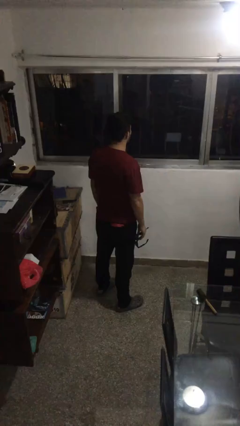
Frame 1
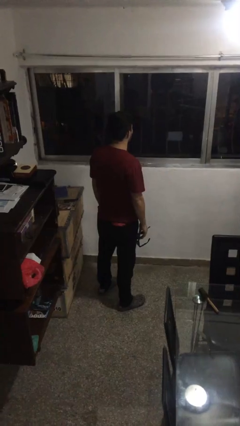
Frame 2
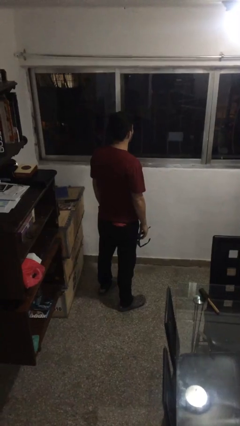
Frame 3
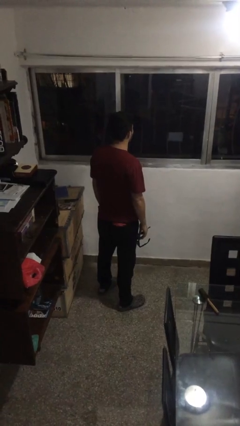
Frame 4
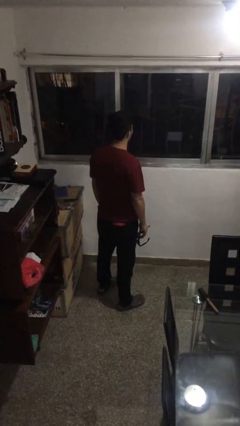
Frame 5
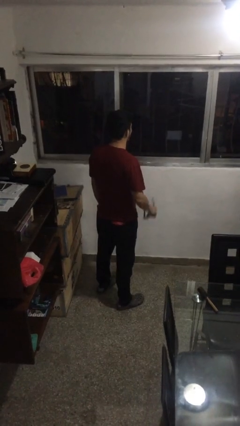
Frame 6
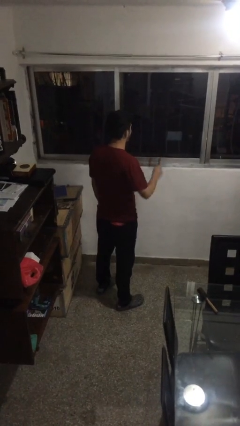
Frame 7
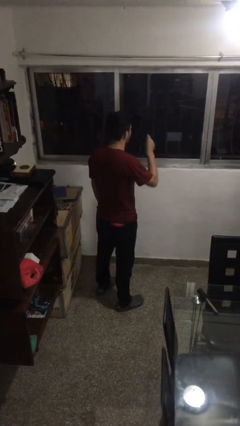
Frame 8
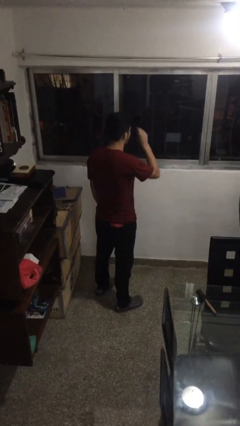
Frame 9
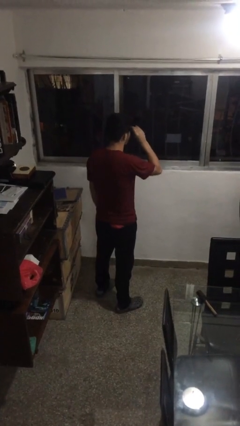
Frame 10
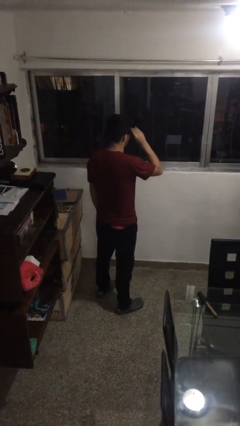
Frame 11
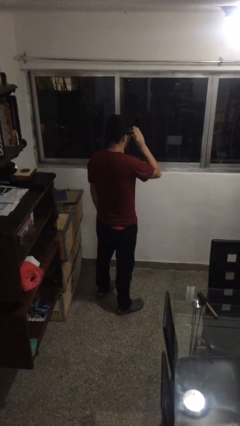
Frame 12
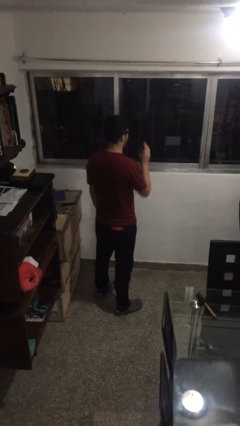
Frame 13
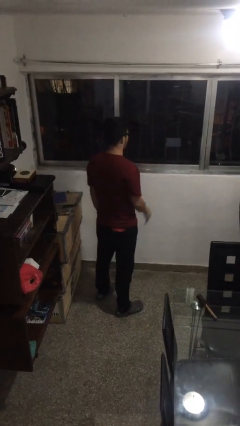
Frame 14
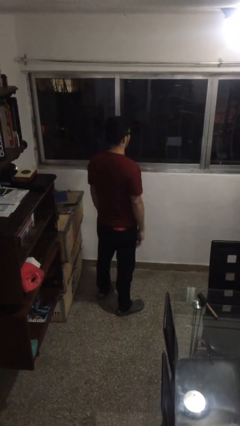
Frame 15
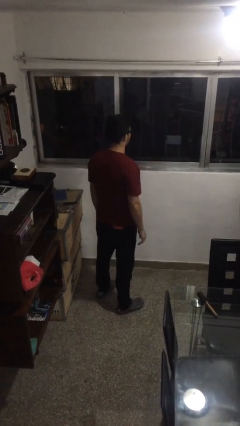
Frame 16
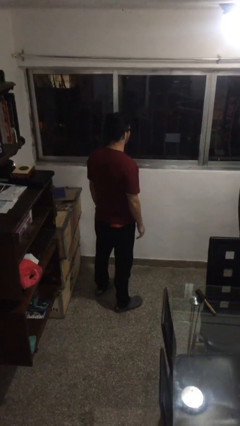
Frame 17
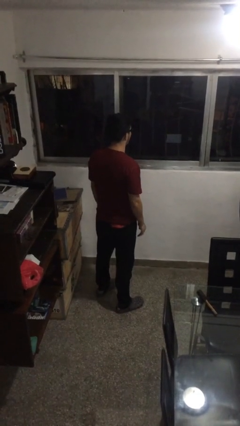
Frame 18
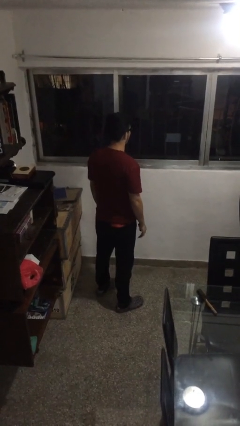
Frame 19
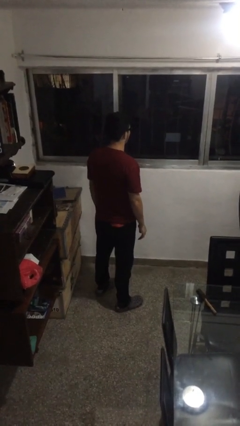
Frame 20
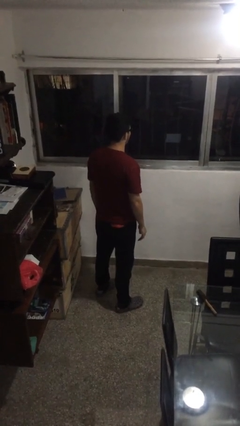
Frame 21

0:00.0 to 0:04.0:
person puts on sunglasses

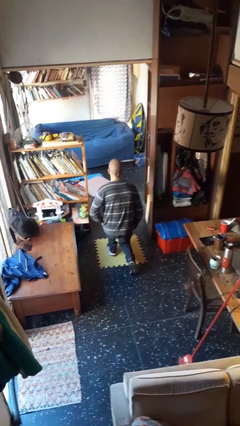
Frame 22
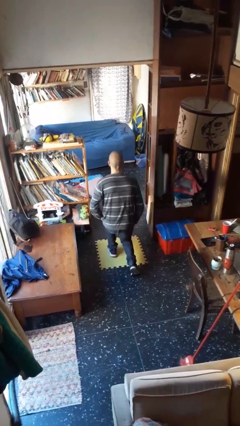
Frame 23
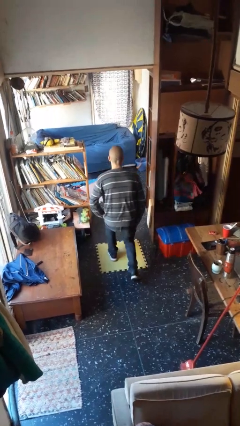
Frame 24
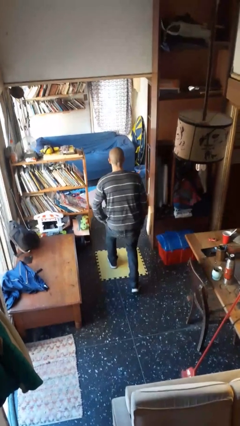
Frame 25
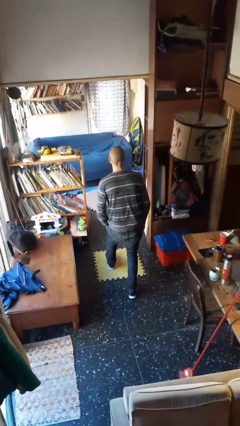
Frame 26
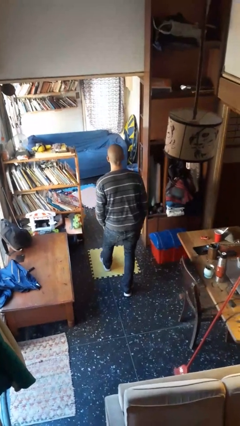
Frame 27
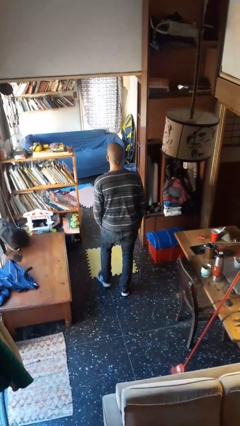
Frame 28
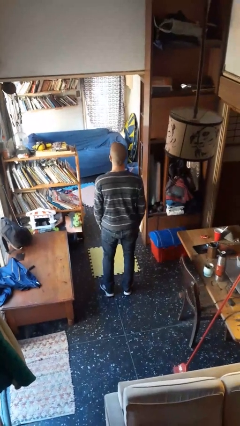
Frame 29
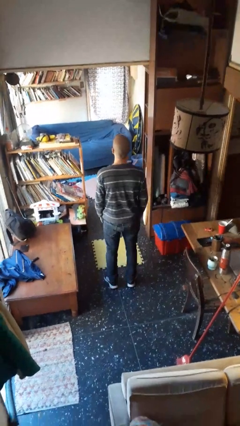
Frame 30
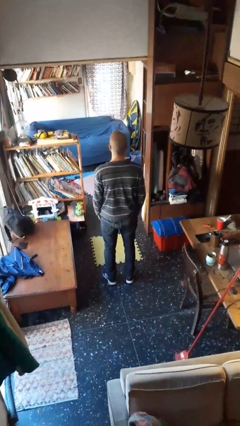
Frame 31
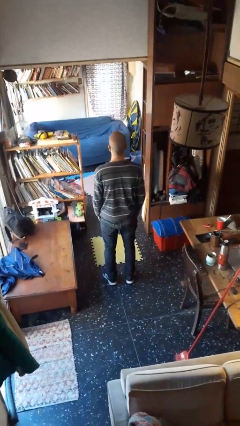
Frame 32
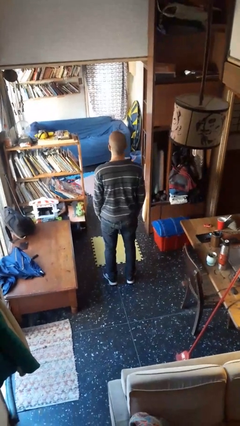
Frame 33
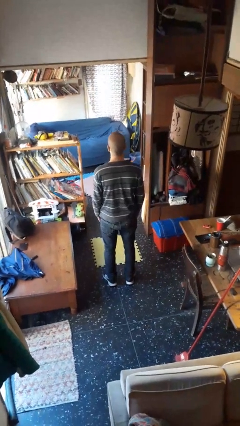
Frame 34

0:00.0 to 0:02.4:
person stands up from floor

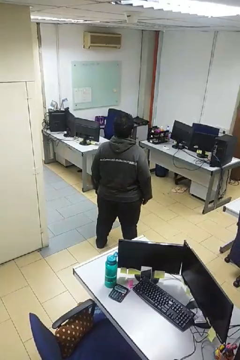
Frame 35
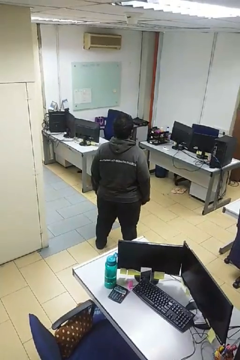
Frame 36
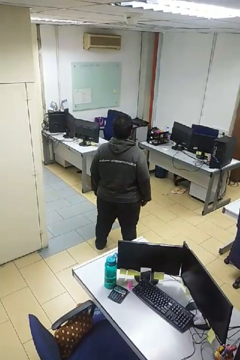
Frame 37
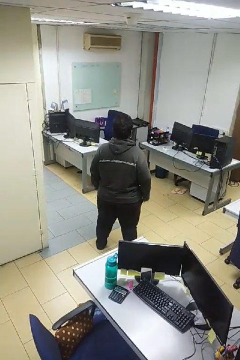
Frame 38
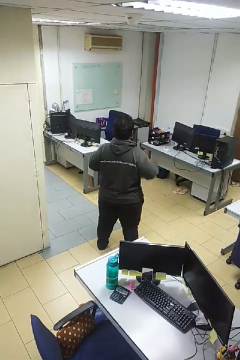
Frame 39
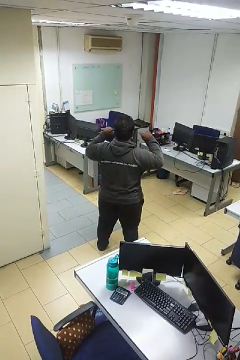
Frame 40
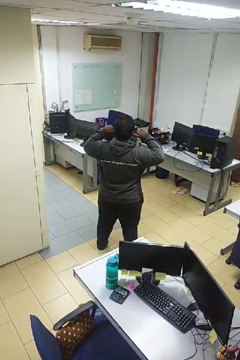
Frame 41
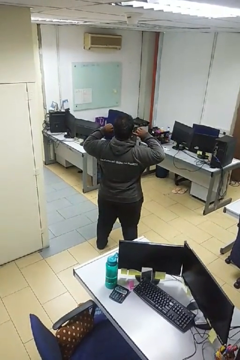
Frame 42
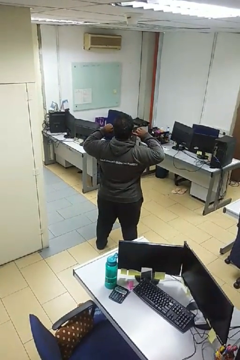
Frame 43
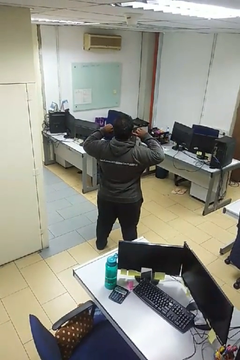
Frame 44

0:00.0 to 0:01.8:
person puts fingers in ear

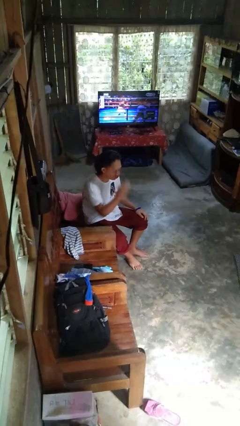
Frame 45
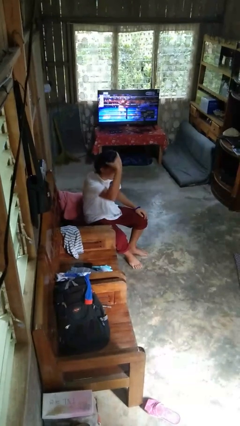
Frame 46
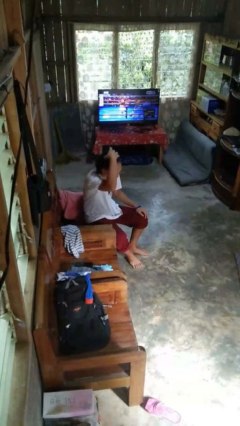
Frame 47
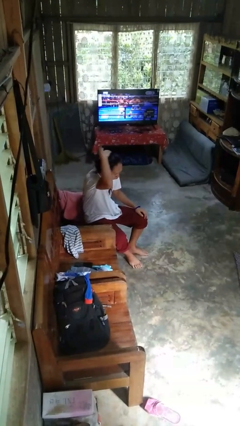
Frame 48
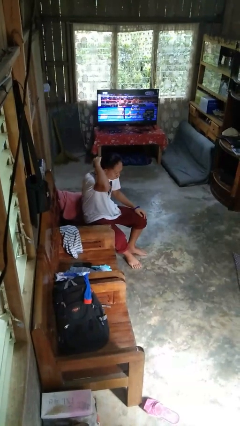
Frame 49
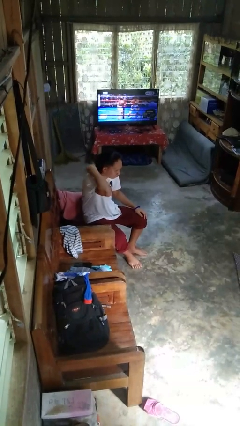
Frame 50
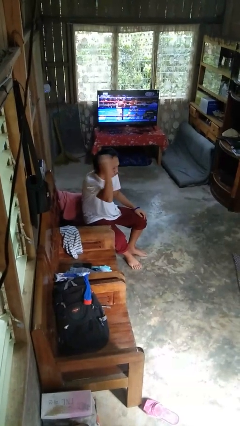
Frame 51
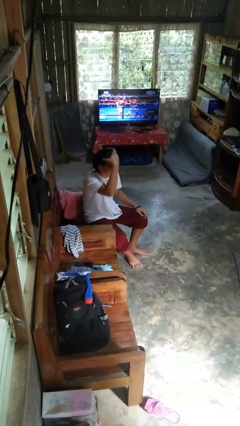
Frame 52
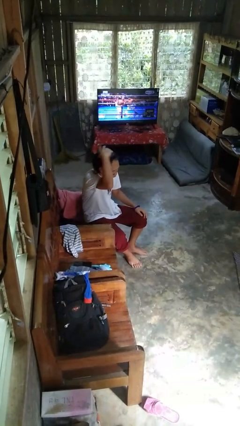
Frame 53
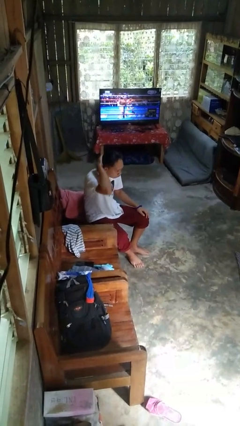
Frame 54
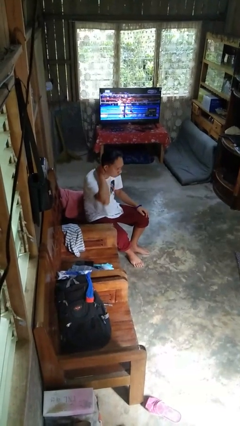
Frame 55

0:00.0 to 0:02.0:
person strokes hair

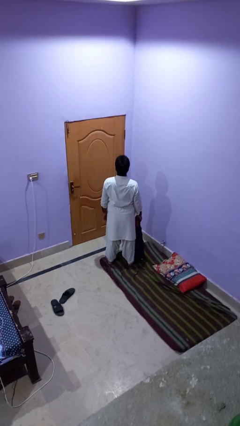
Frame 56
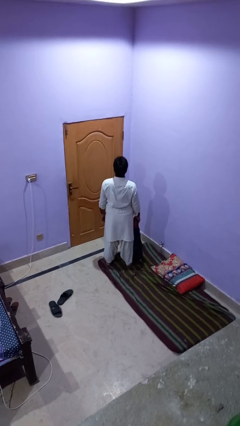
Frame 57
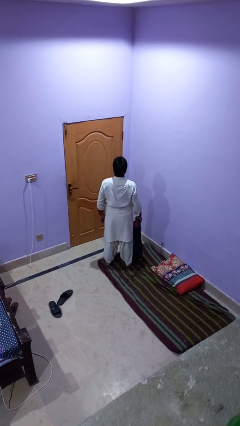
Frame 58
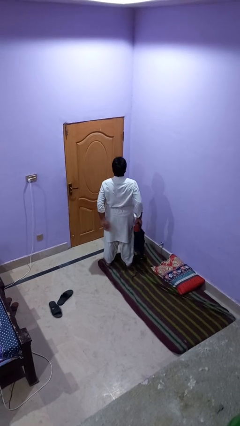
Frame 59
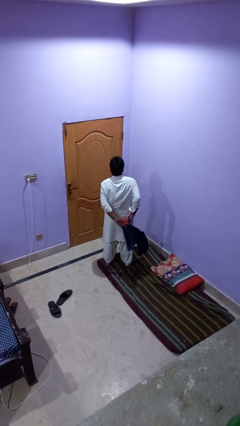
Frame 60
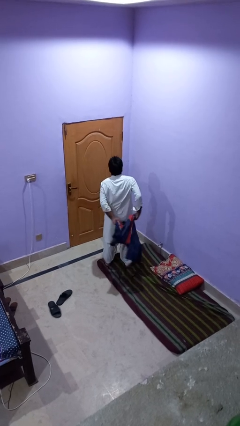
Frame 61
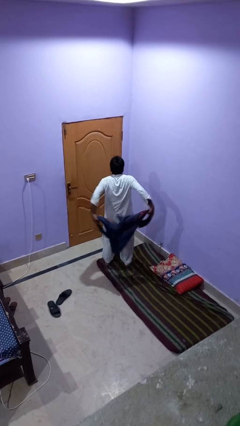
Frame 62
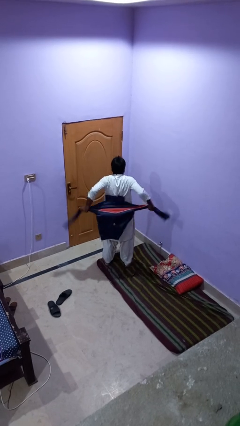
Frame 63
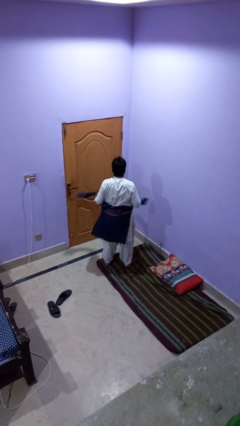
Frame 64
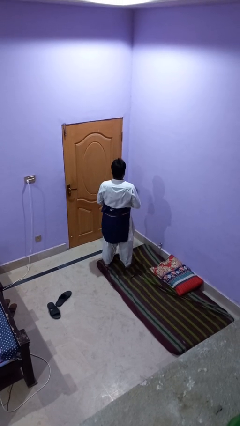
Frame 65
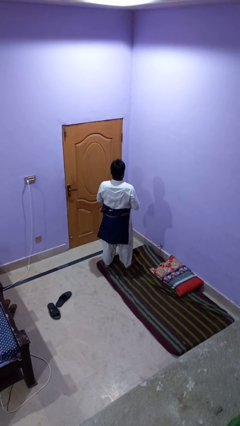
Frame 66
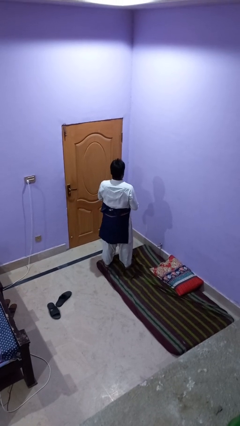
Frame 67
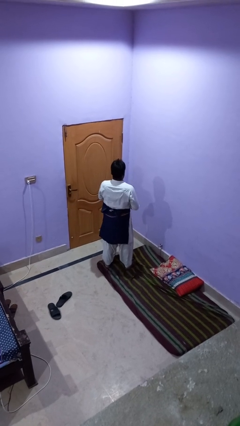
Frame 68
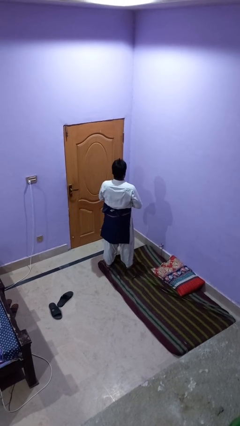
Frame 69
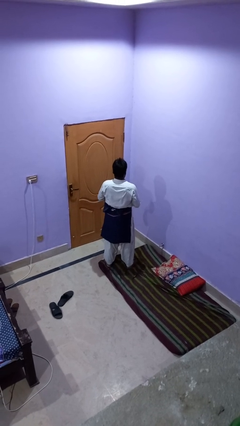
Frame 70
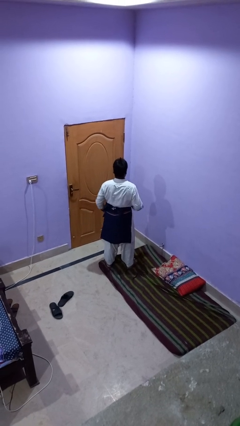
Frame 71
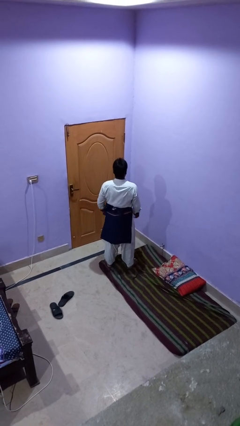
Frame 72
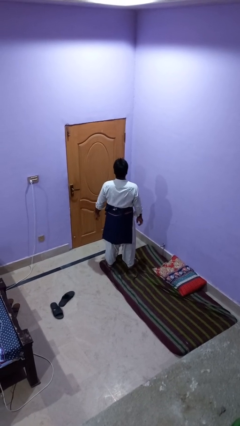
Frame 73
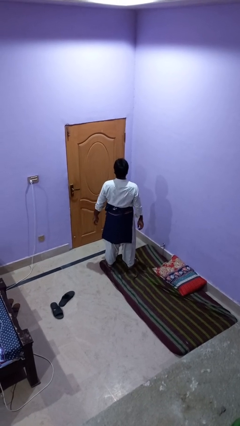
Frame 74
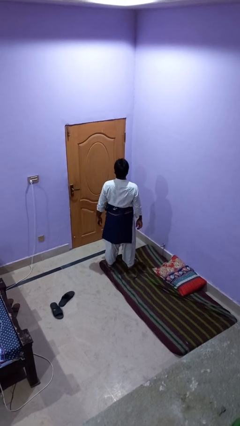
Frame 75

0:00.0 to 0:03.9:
person ties jacket around waist

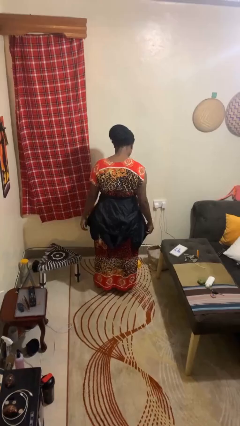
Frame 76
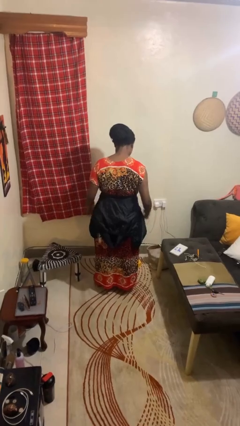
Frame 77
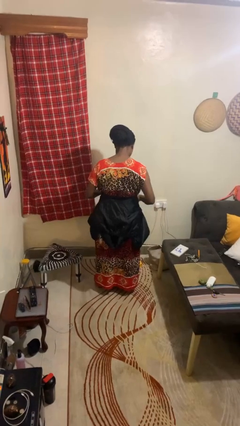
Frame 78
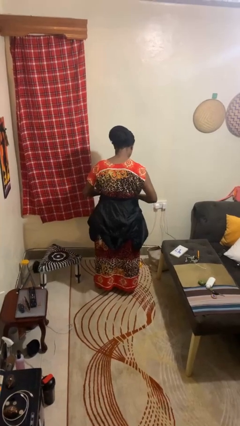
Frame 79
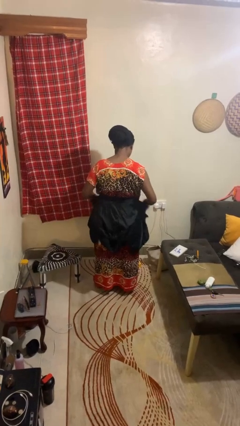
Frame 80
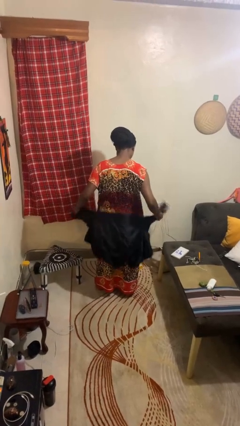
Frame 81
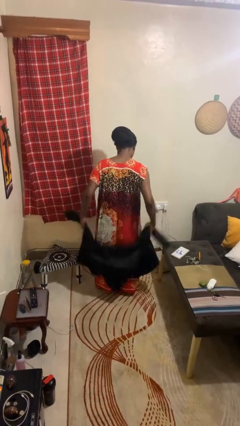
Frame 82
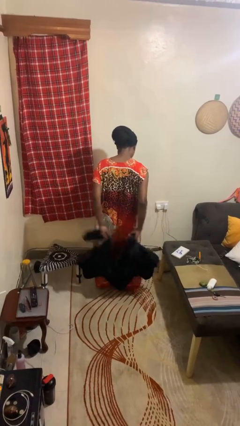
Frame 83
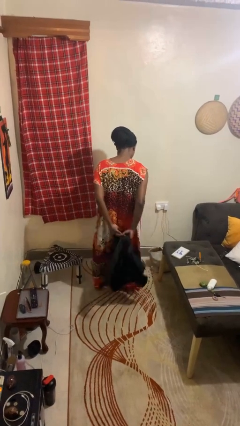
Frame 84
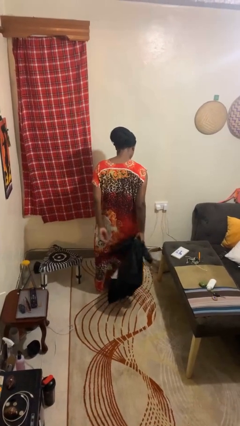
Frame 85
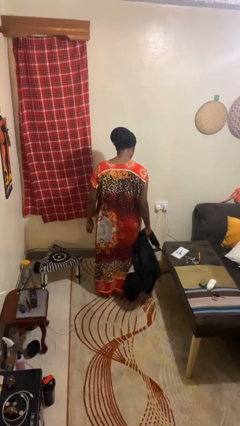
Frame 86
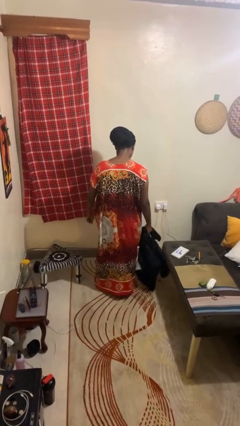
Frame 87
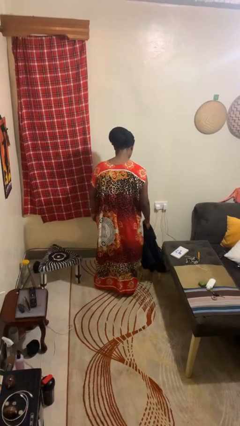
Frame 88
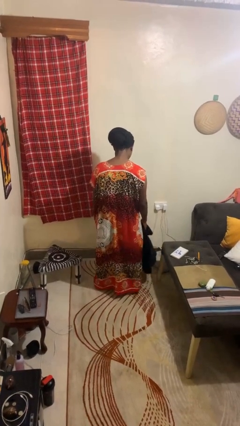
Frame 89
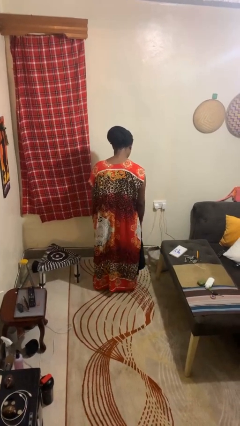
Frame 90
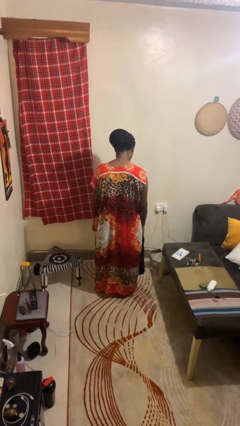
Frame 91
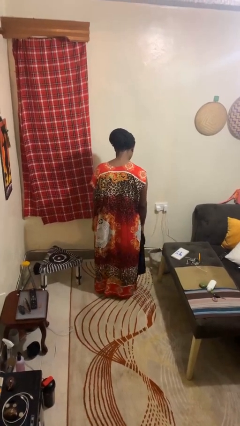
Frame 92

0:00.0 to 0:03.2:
person unties jacket around waist

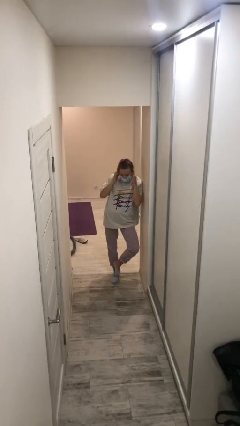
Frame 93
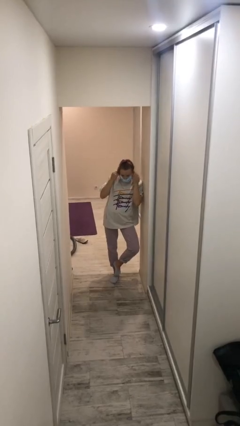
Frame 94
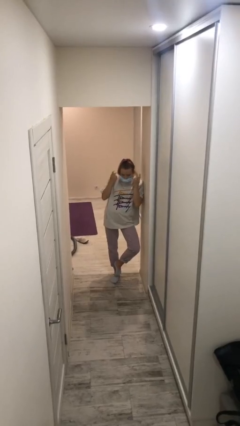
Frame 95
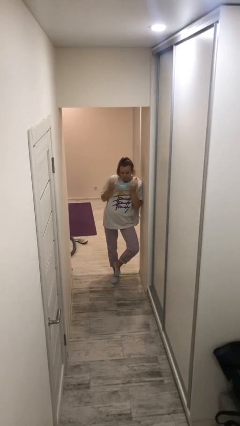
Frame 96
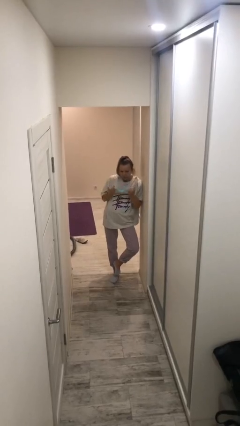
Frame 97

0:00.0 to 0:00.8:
person takes off facemask
